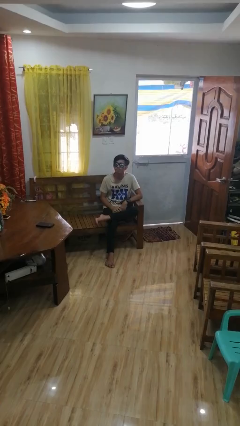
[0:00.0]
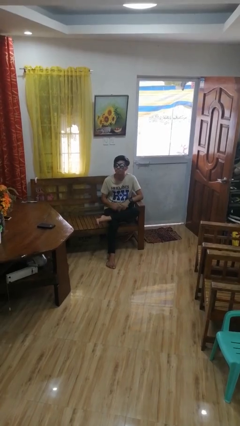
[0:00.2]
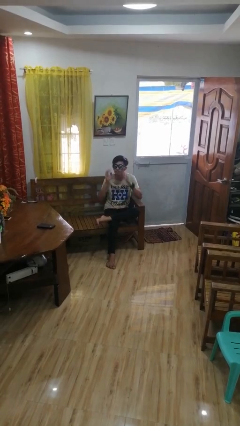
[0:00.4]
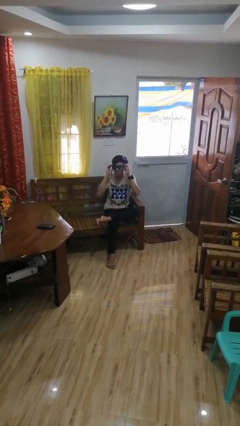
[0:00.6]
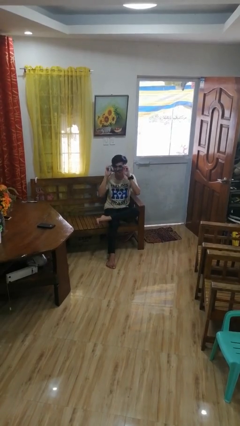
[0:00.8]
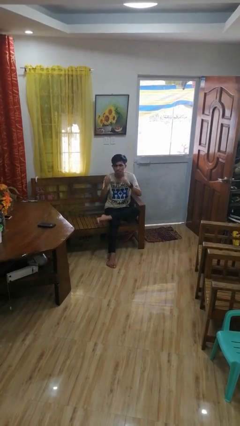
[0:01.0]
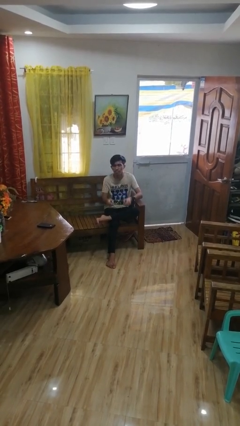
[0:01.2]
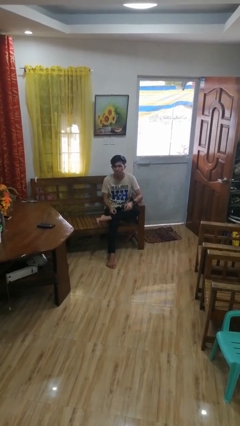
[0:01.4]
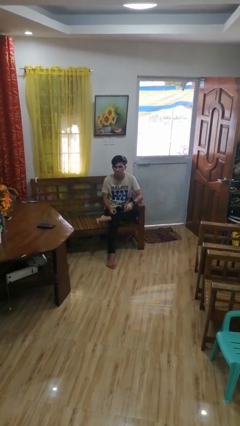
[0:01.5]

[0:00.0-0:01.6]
person takes off sunglasses

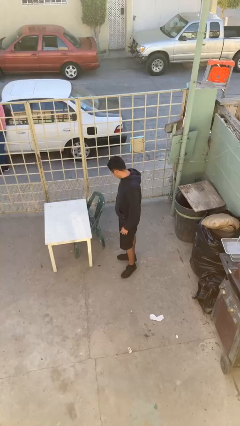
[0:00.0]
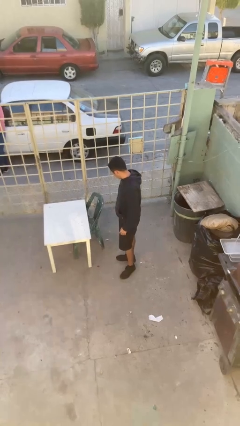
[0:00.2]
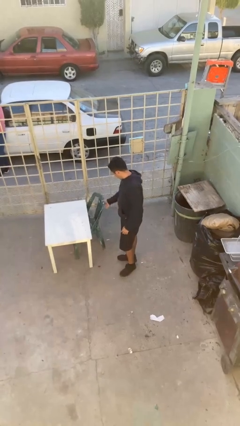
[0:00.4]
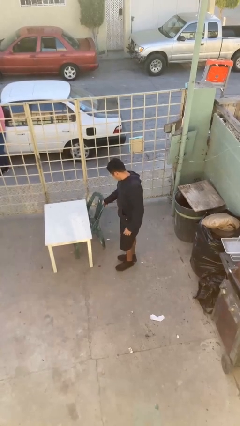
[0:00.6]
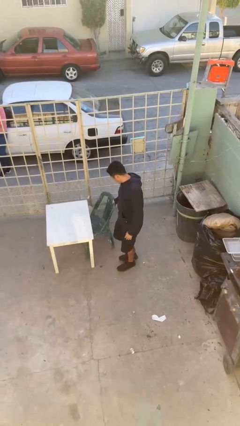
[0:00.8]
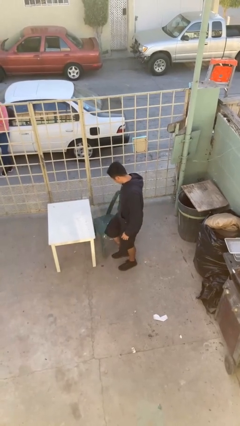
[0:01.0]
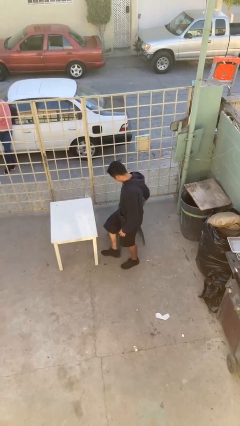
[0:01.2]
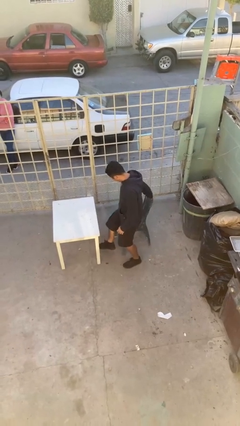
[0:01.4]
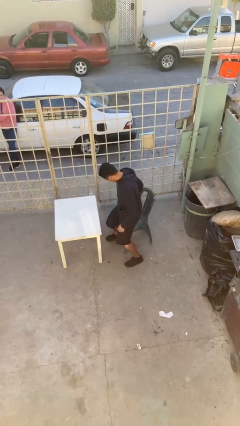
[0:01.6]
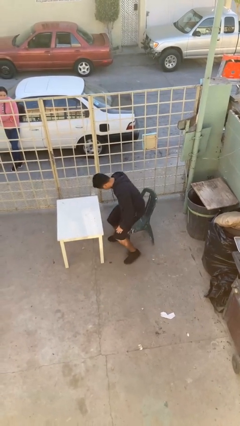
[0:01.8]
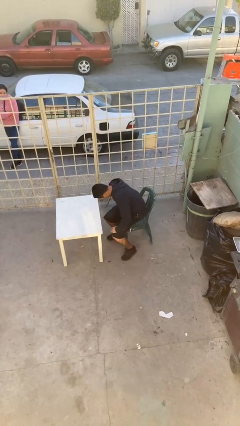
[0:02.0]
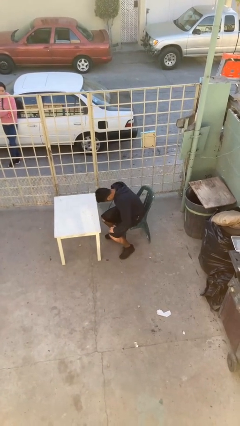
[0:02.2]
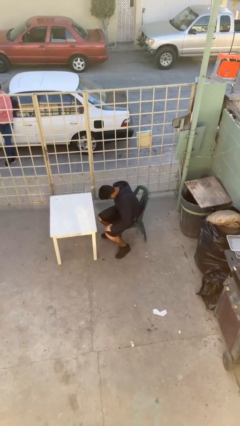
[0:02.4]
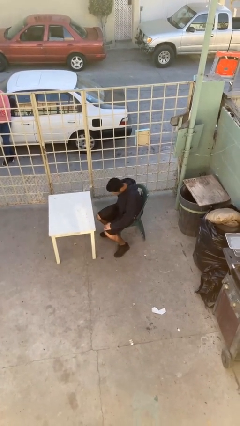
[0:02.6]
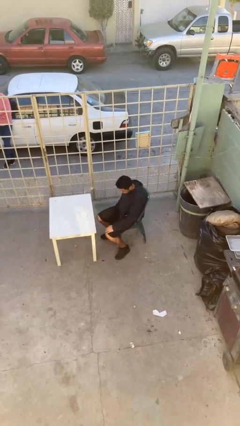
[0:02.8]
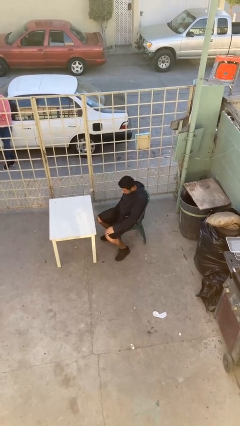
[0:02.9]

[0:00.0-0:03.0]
person sits down

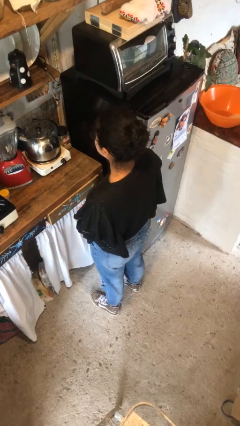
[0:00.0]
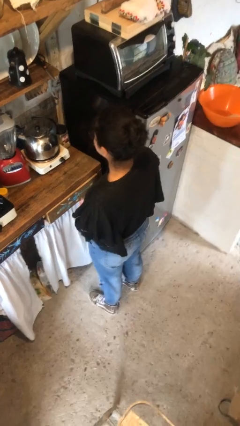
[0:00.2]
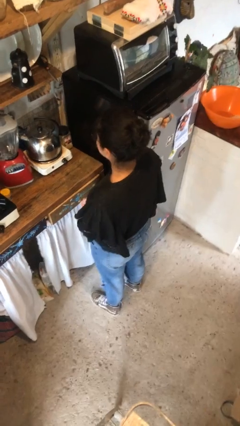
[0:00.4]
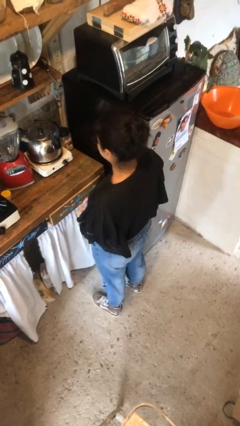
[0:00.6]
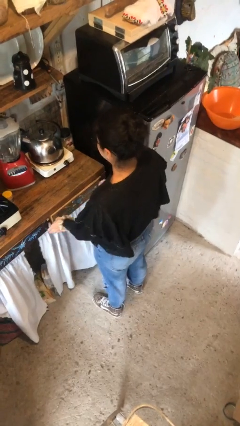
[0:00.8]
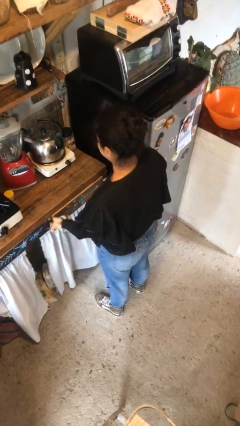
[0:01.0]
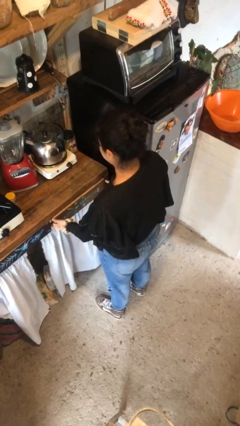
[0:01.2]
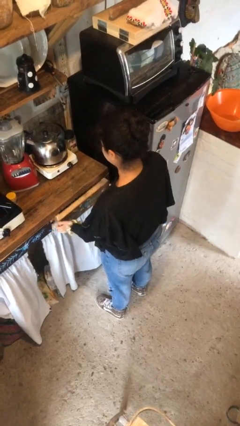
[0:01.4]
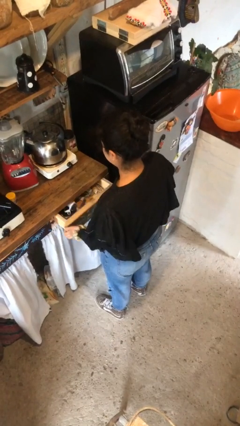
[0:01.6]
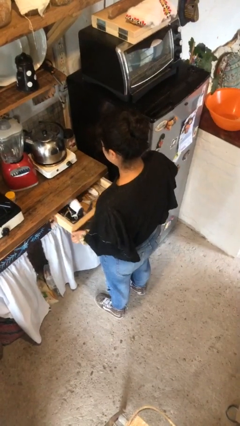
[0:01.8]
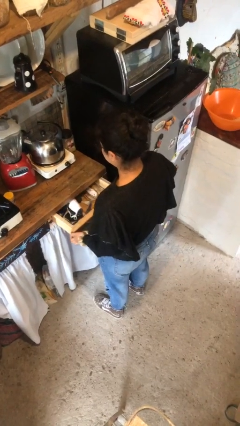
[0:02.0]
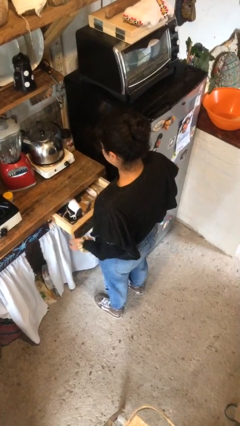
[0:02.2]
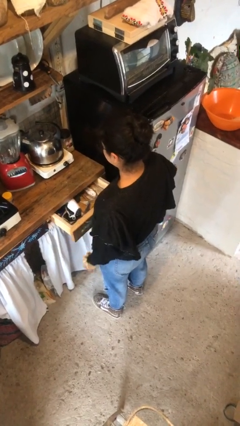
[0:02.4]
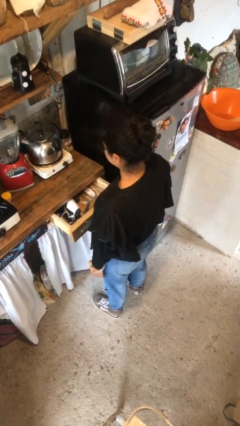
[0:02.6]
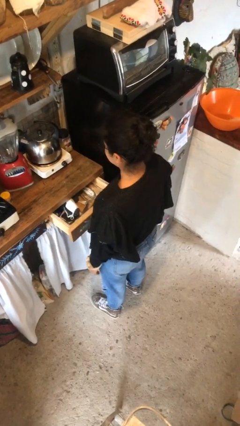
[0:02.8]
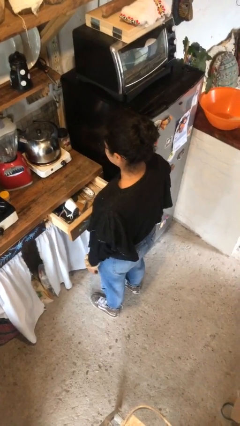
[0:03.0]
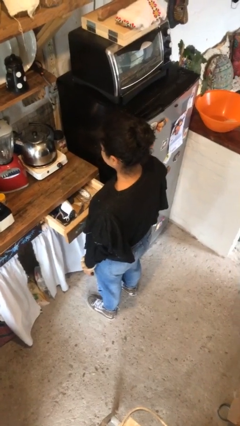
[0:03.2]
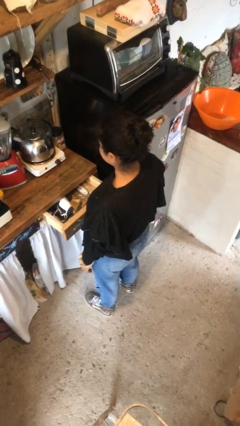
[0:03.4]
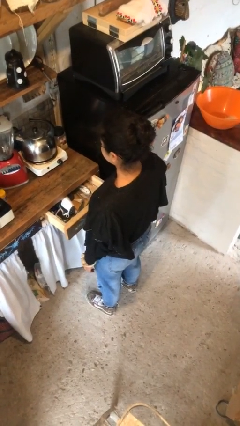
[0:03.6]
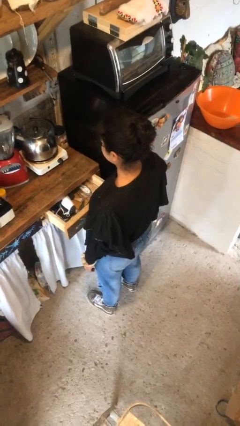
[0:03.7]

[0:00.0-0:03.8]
person opens kitchen drawer

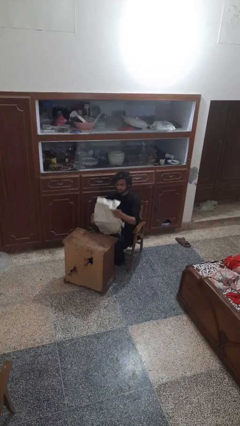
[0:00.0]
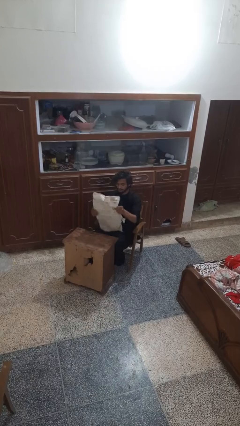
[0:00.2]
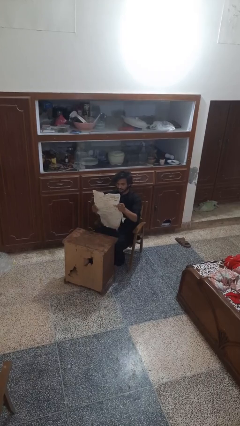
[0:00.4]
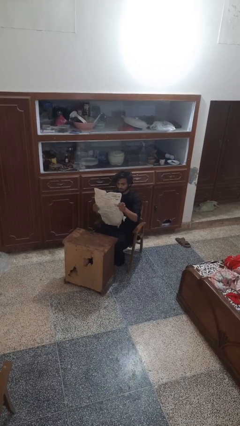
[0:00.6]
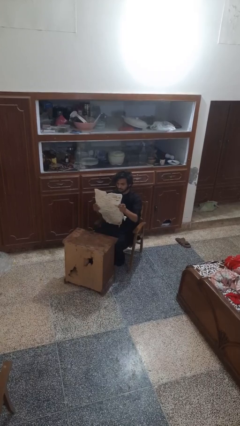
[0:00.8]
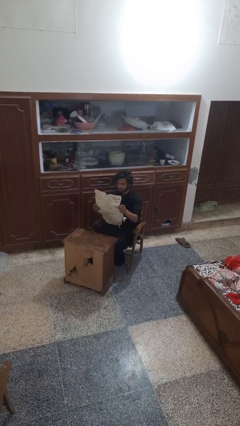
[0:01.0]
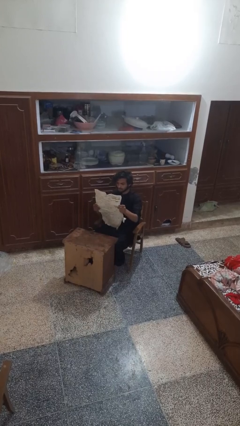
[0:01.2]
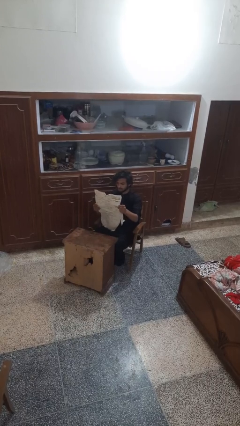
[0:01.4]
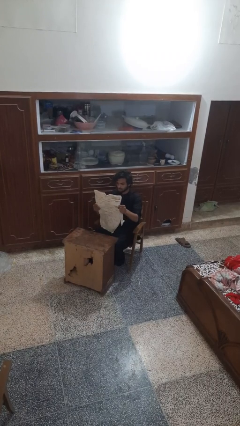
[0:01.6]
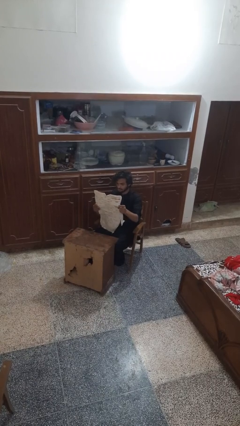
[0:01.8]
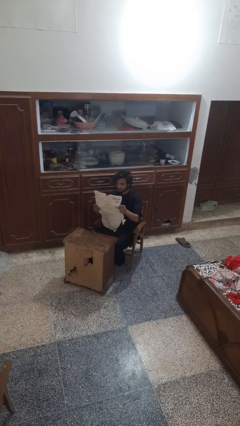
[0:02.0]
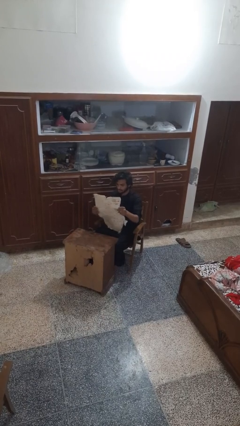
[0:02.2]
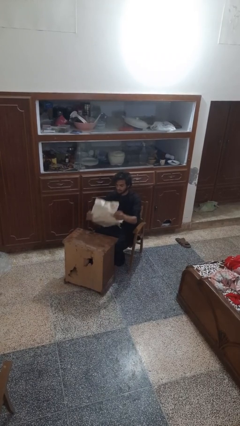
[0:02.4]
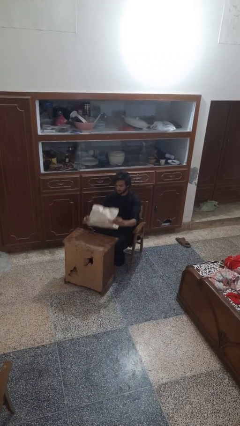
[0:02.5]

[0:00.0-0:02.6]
person reads newspaper

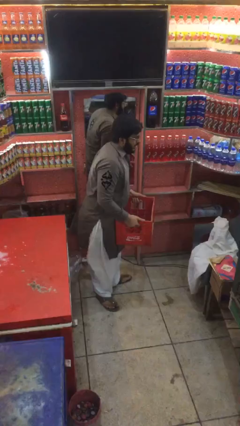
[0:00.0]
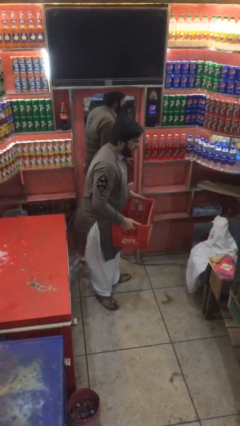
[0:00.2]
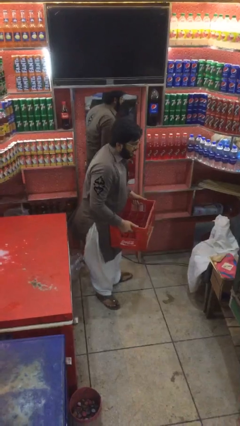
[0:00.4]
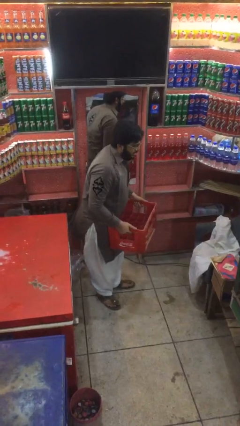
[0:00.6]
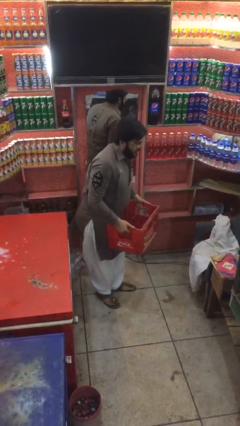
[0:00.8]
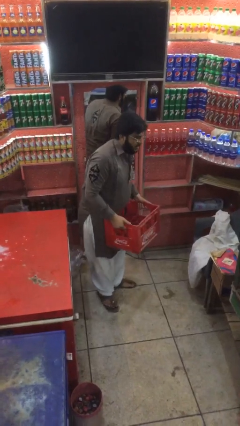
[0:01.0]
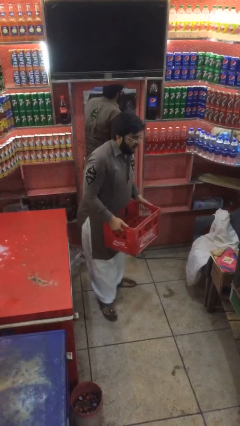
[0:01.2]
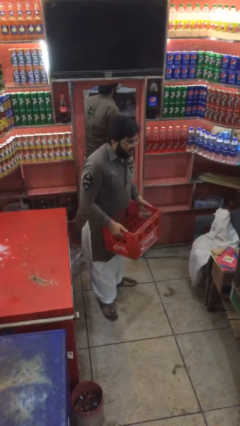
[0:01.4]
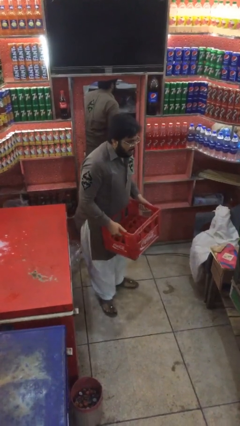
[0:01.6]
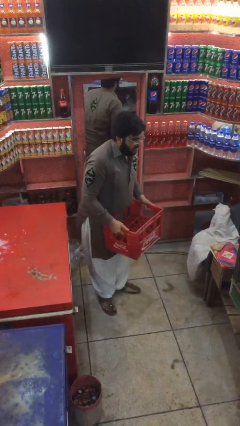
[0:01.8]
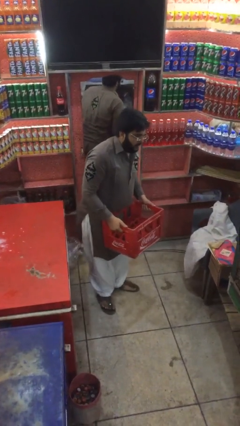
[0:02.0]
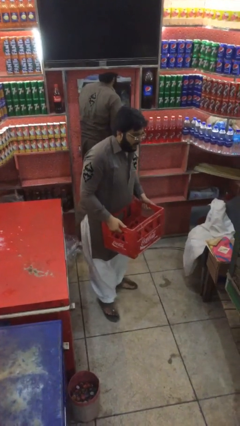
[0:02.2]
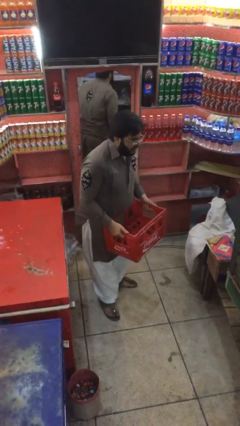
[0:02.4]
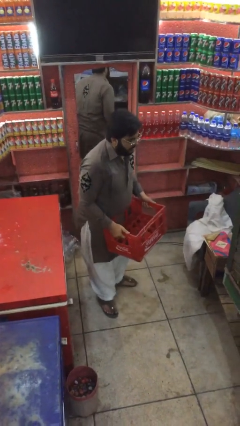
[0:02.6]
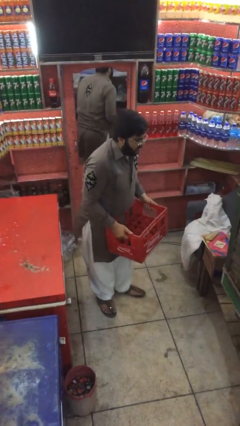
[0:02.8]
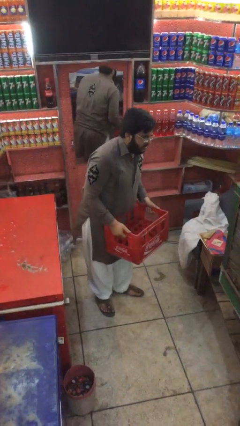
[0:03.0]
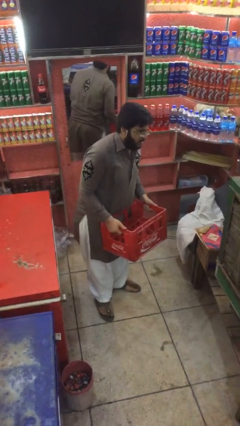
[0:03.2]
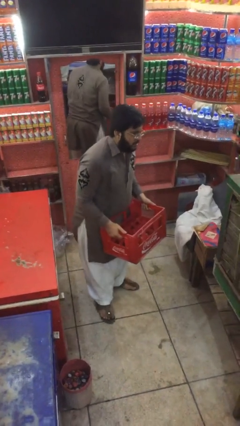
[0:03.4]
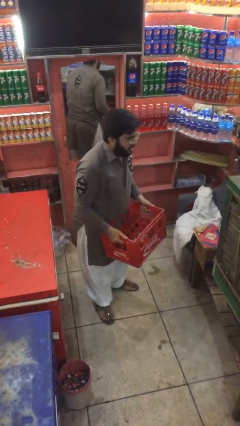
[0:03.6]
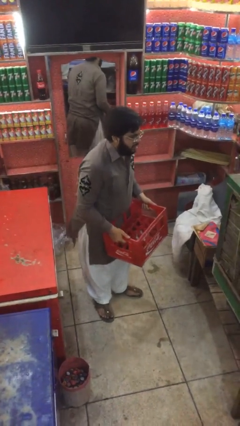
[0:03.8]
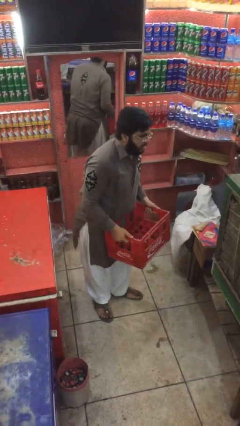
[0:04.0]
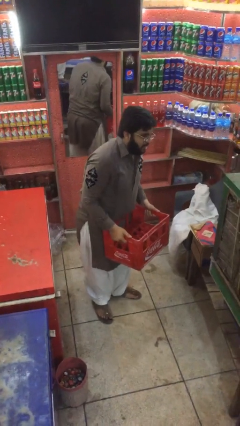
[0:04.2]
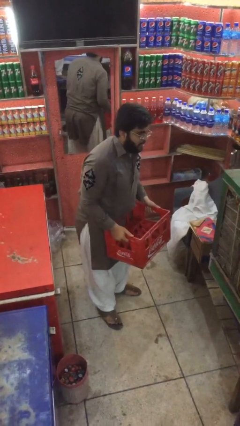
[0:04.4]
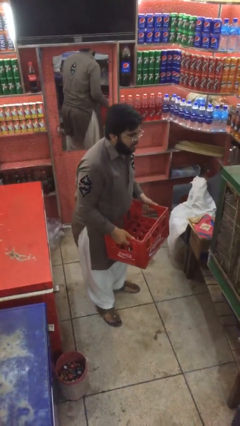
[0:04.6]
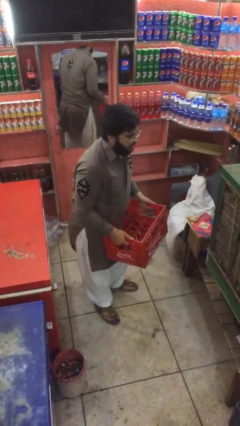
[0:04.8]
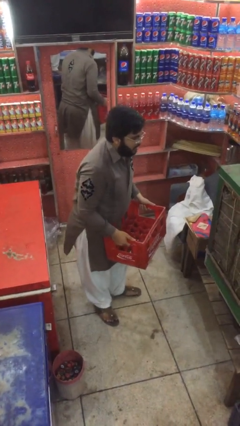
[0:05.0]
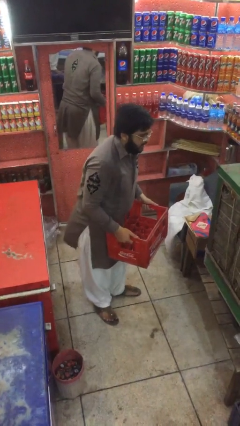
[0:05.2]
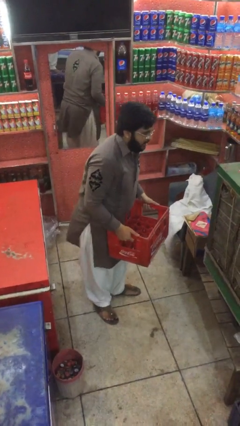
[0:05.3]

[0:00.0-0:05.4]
person carries heavy object

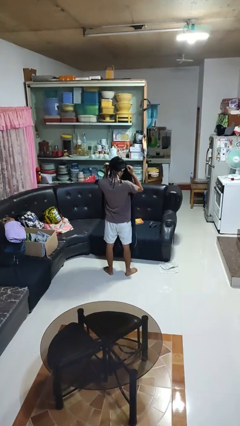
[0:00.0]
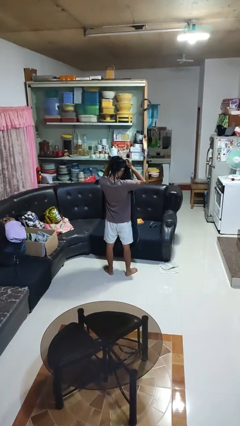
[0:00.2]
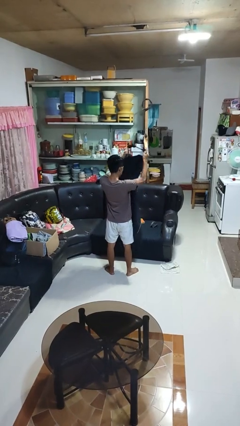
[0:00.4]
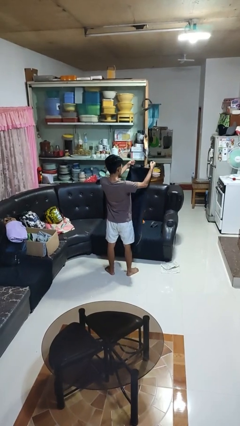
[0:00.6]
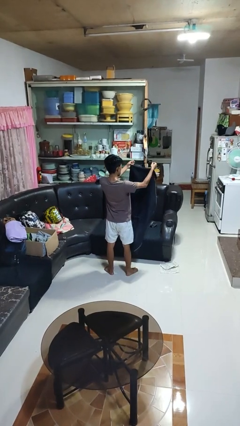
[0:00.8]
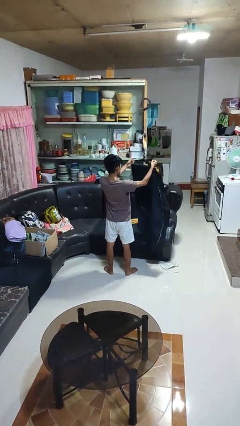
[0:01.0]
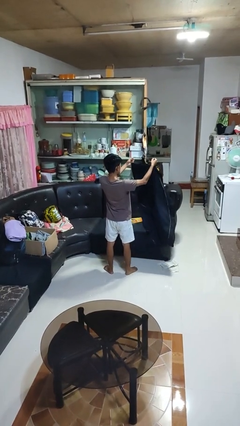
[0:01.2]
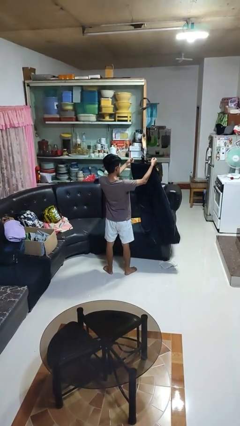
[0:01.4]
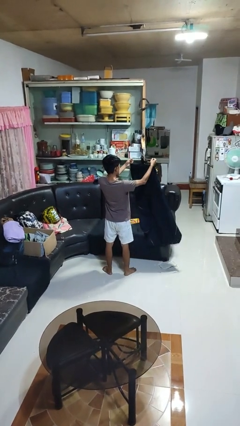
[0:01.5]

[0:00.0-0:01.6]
person takes off apron
